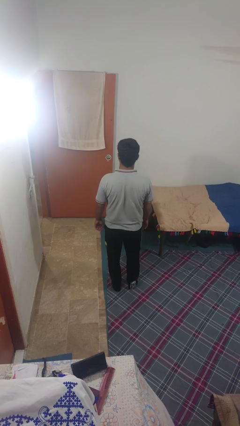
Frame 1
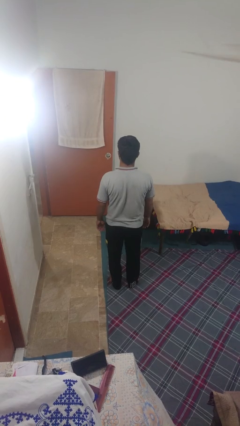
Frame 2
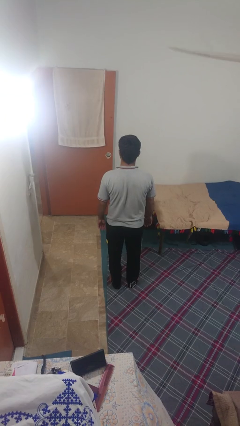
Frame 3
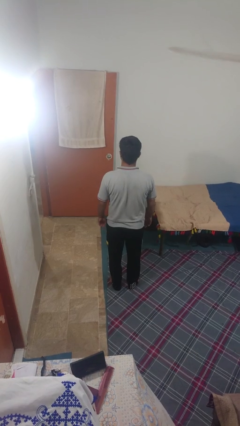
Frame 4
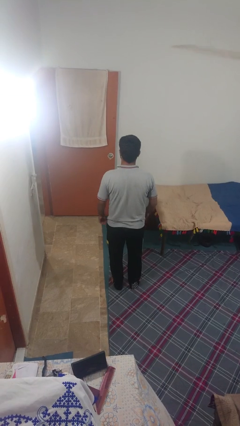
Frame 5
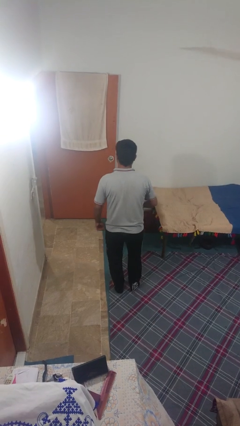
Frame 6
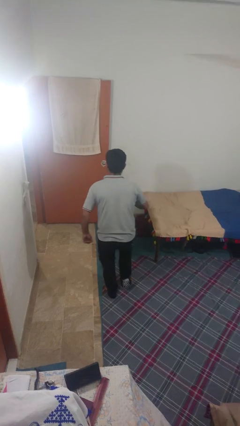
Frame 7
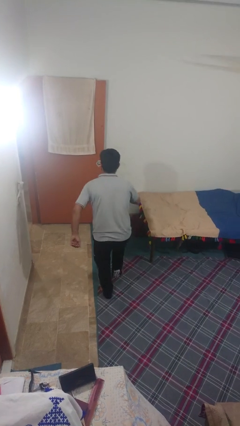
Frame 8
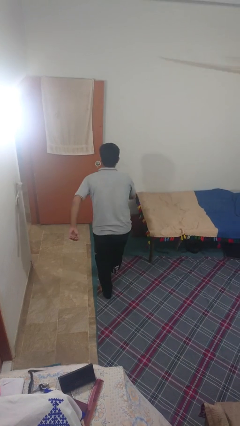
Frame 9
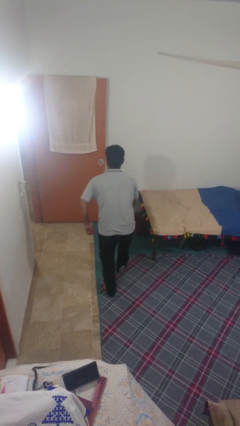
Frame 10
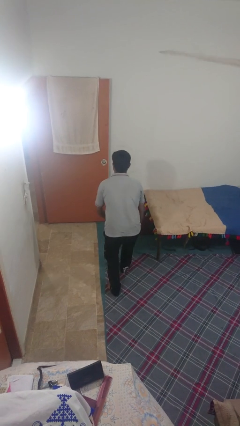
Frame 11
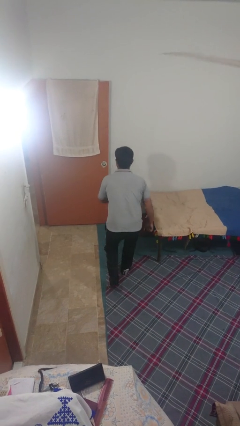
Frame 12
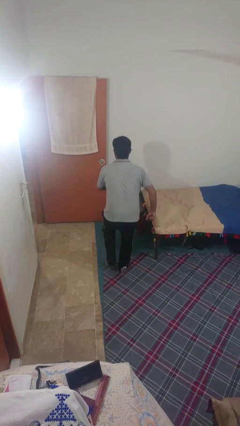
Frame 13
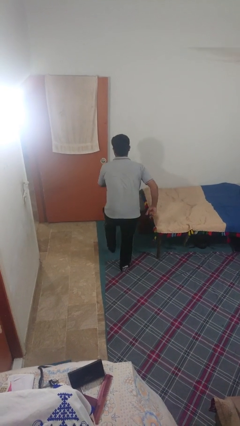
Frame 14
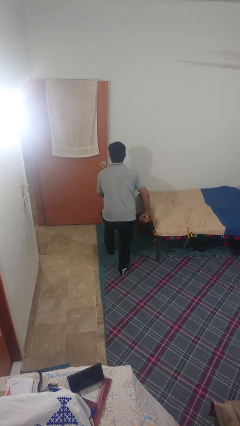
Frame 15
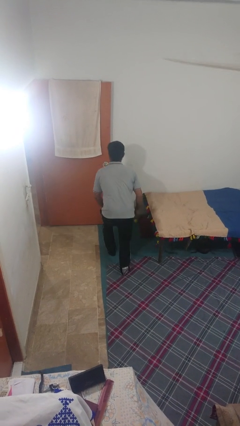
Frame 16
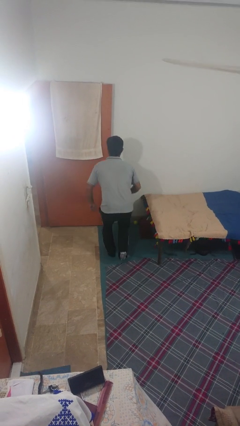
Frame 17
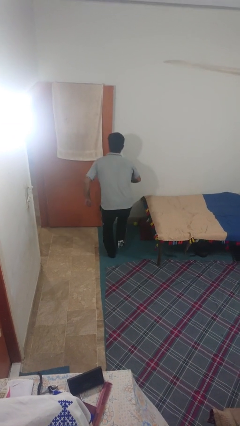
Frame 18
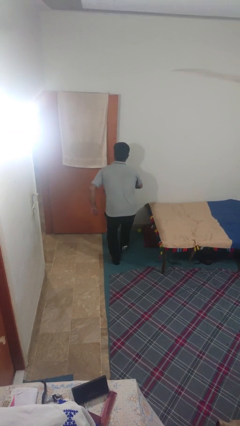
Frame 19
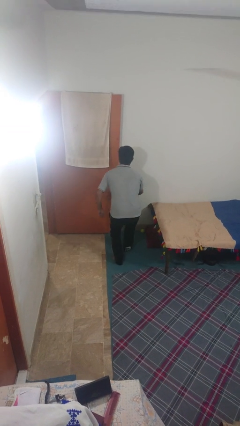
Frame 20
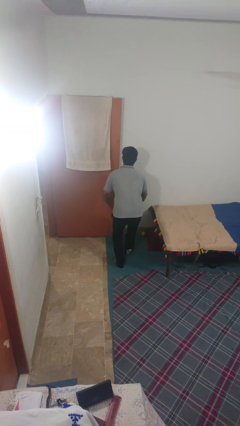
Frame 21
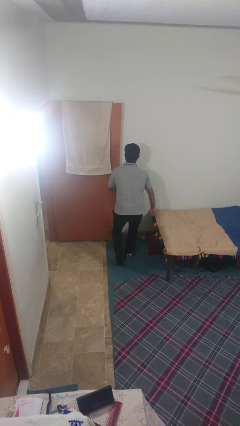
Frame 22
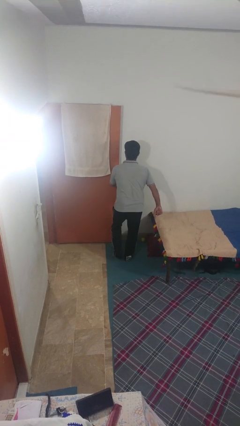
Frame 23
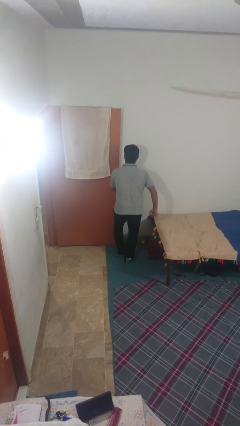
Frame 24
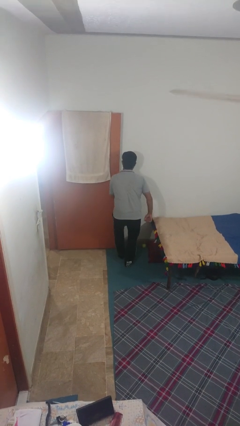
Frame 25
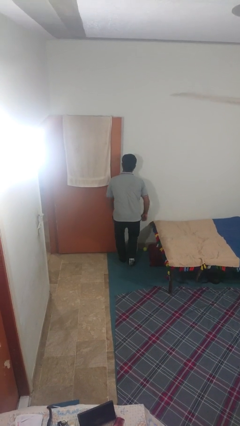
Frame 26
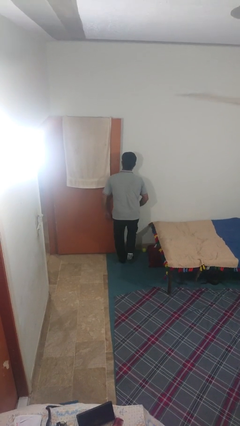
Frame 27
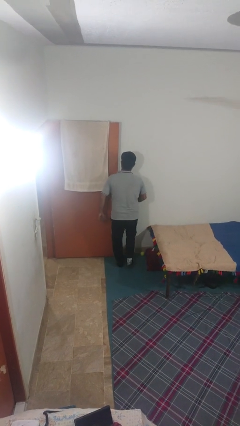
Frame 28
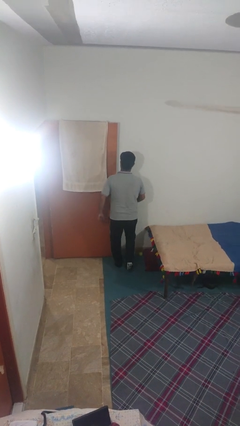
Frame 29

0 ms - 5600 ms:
person walks tiptoe

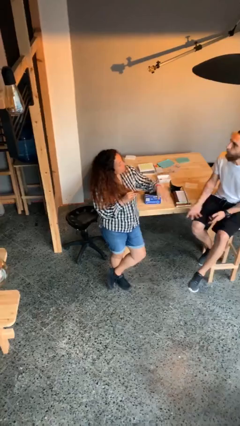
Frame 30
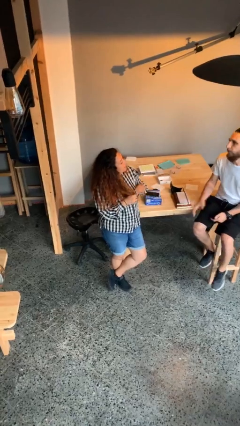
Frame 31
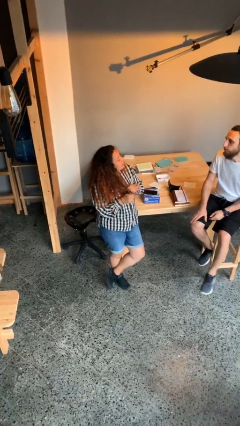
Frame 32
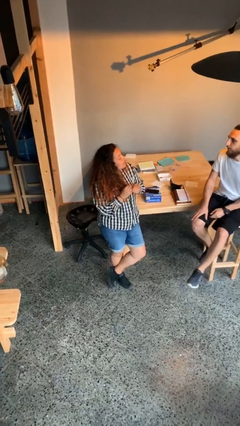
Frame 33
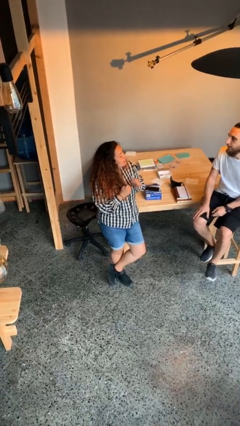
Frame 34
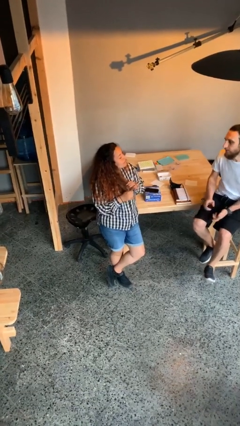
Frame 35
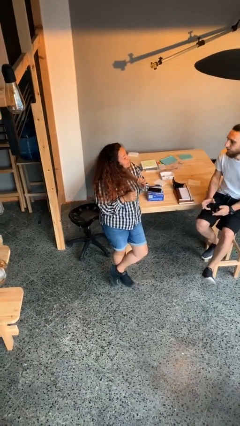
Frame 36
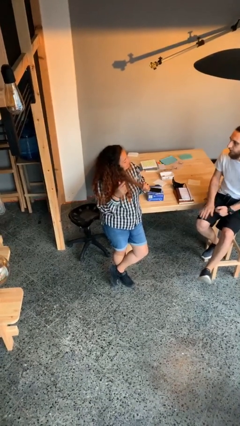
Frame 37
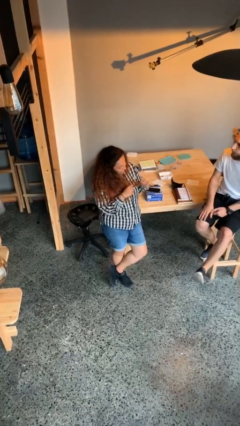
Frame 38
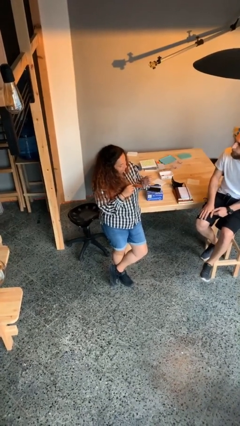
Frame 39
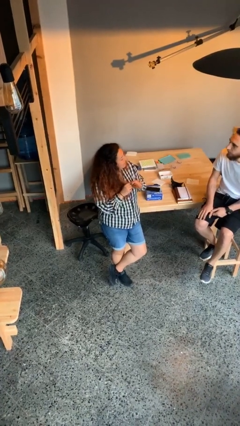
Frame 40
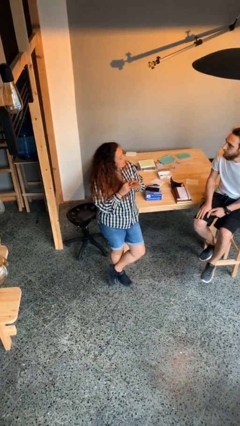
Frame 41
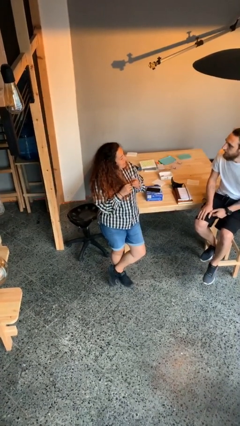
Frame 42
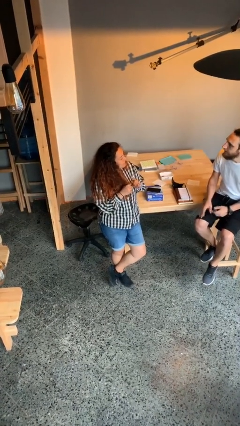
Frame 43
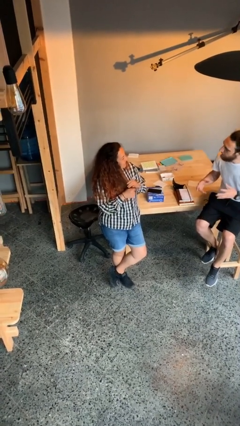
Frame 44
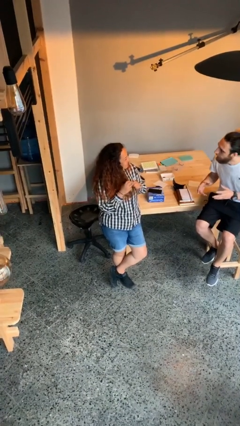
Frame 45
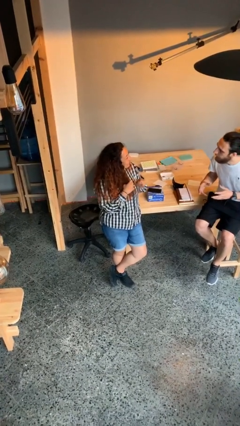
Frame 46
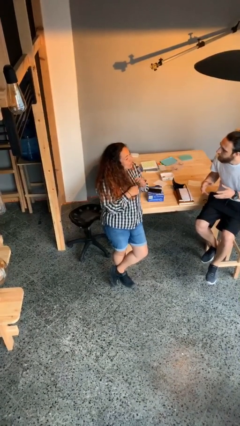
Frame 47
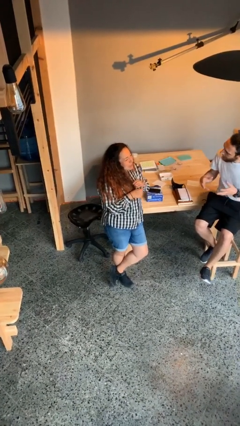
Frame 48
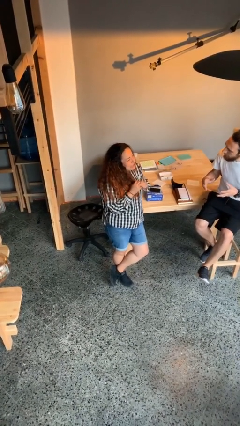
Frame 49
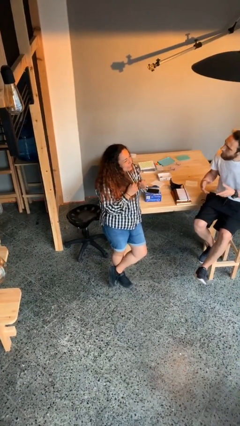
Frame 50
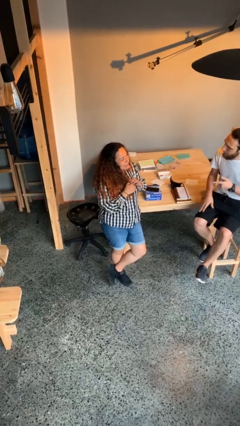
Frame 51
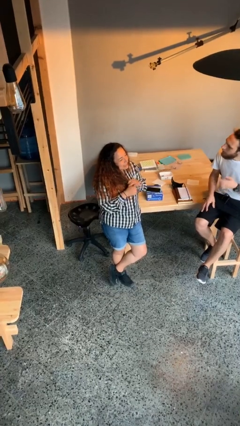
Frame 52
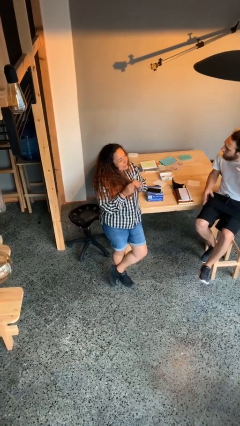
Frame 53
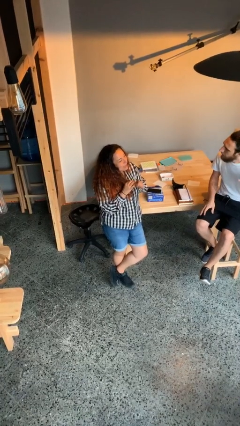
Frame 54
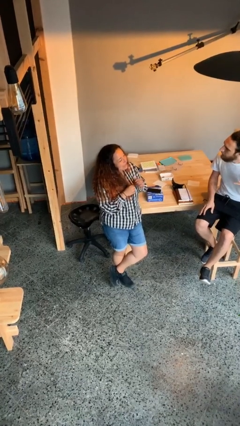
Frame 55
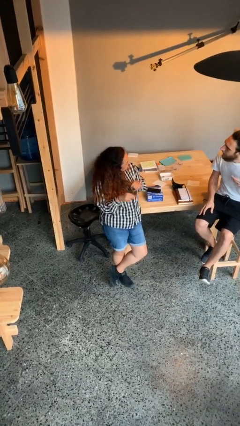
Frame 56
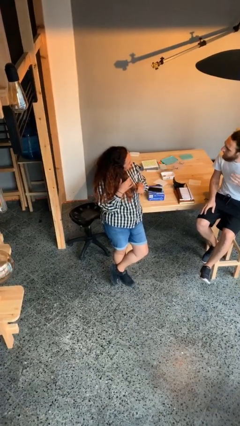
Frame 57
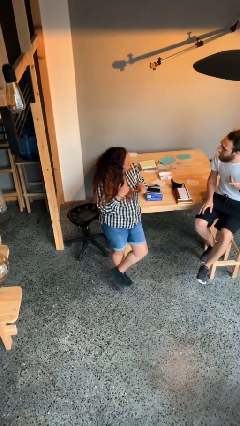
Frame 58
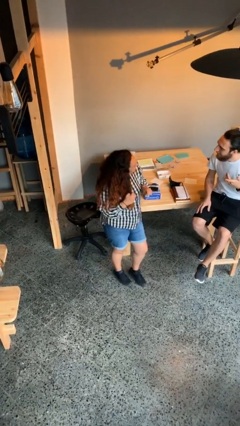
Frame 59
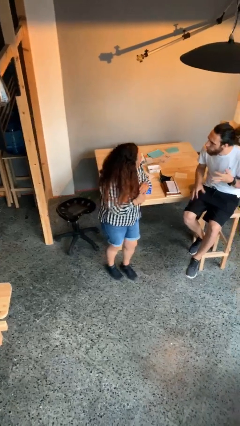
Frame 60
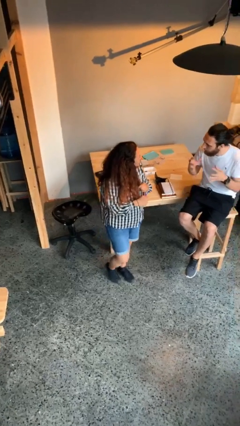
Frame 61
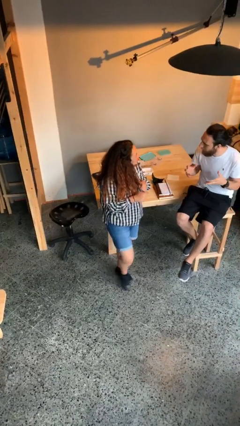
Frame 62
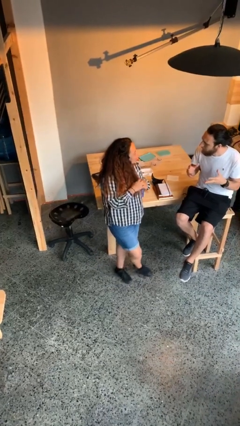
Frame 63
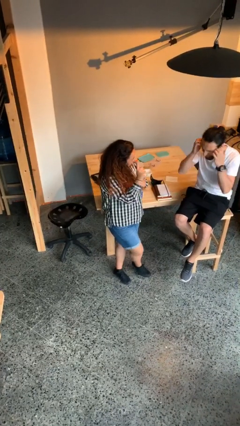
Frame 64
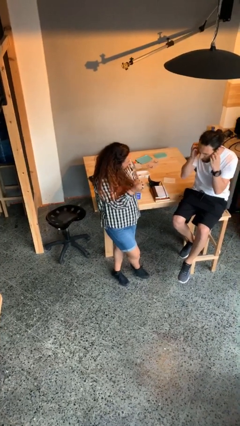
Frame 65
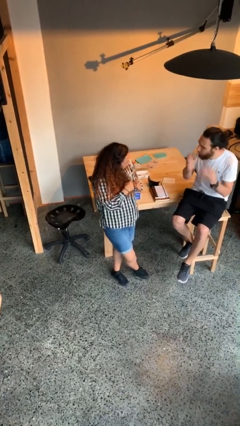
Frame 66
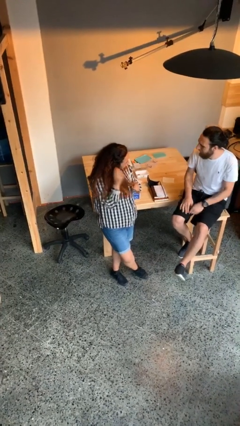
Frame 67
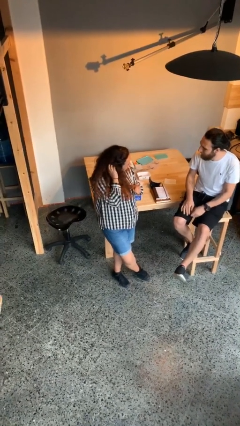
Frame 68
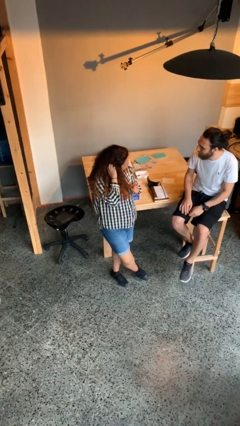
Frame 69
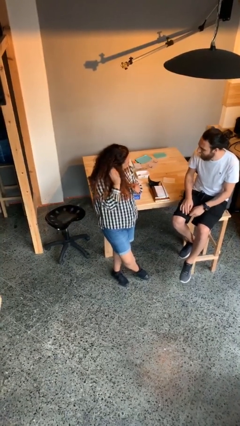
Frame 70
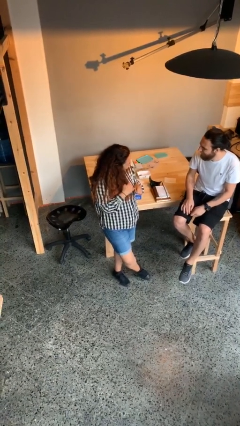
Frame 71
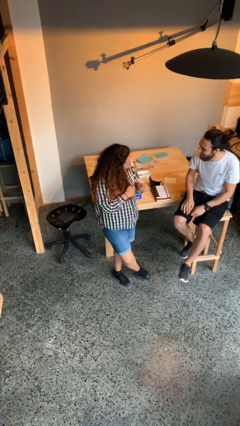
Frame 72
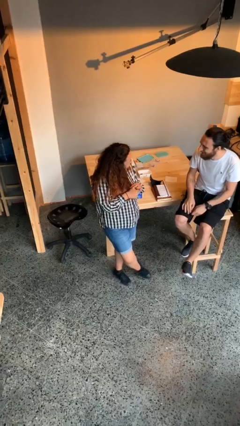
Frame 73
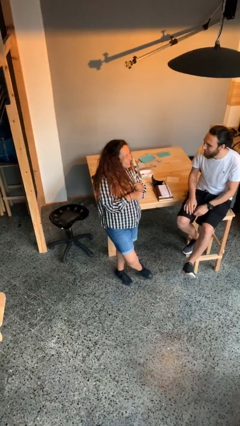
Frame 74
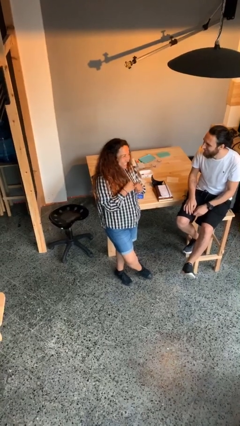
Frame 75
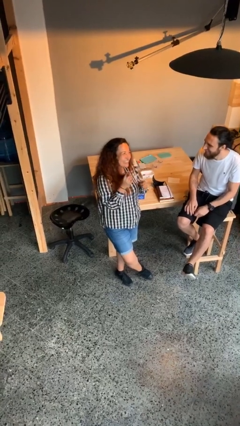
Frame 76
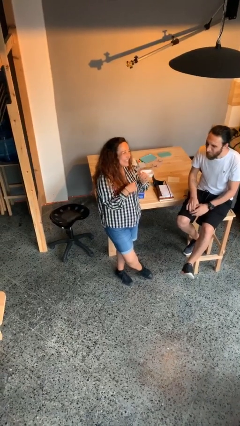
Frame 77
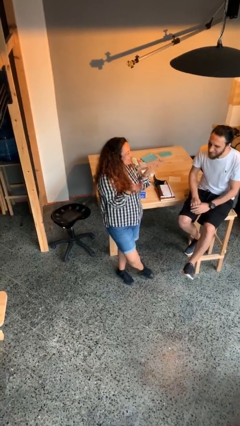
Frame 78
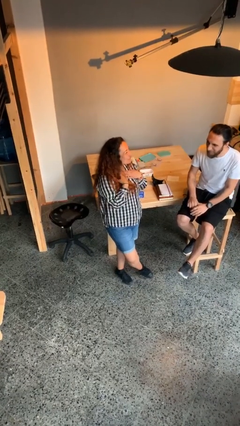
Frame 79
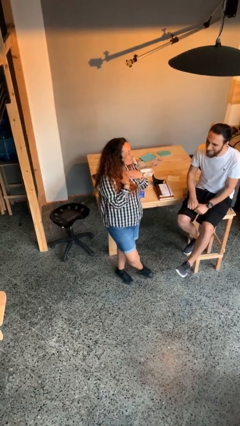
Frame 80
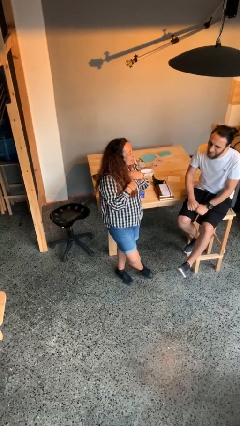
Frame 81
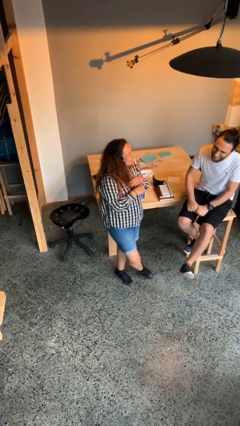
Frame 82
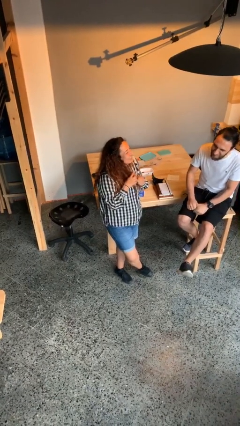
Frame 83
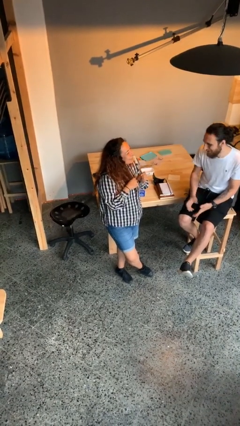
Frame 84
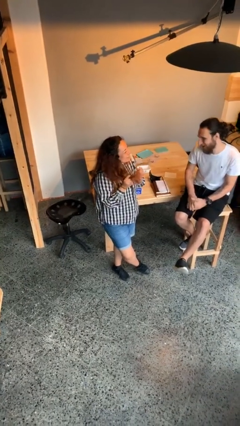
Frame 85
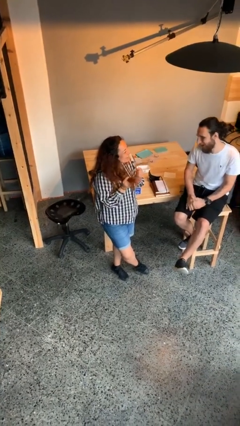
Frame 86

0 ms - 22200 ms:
person talks to person

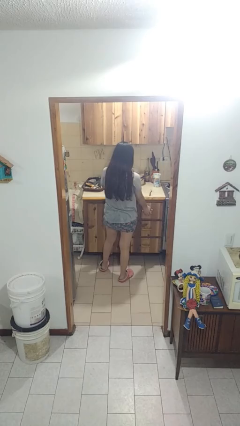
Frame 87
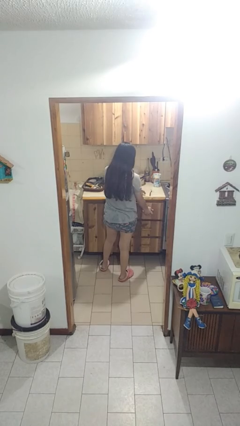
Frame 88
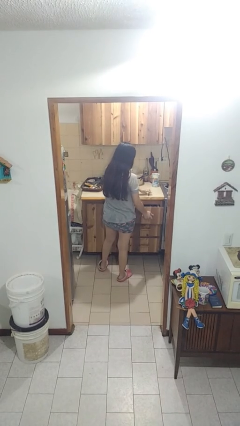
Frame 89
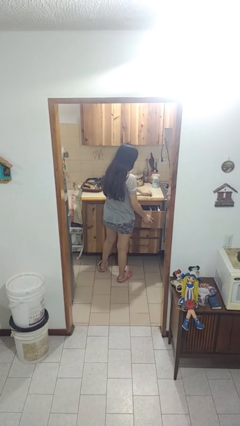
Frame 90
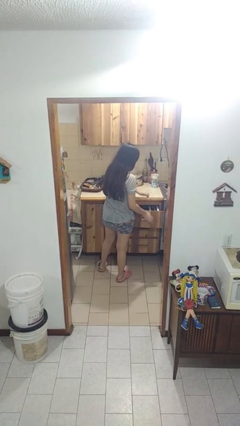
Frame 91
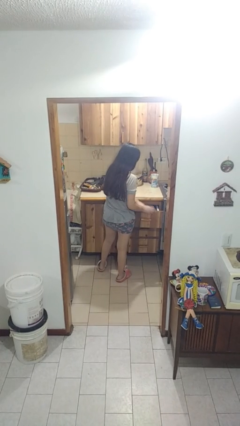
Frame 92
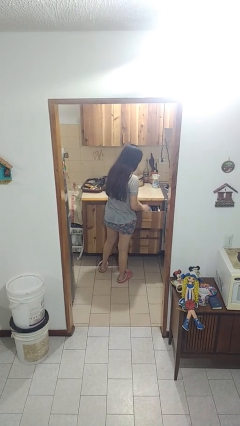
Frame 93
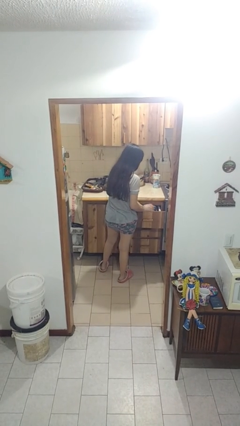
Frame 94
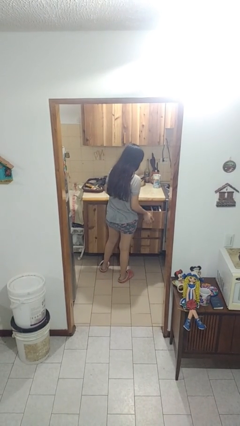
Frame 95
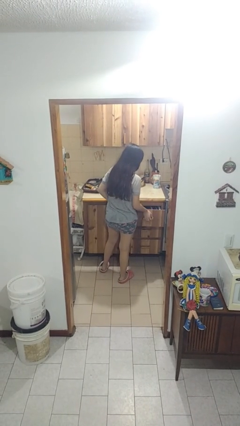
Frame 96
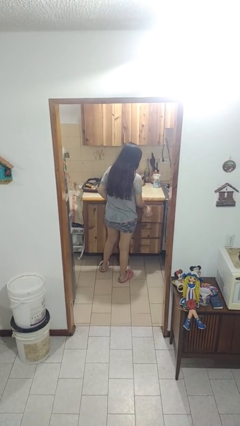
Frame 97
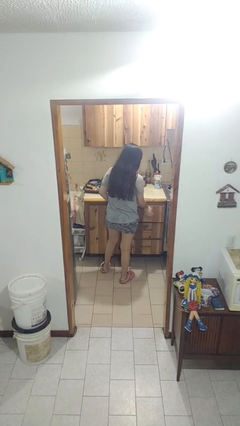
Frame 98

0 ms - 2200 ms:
person puts object into kitchen drawer
